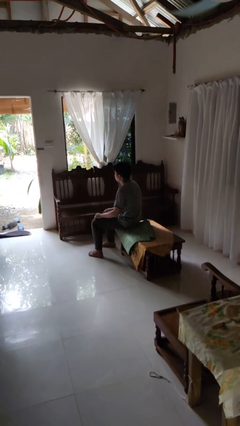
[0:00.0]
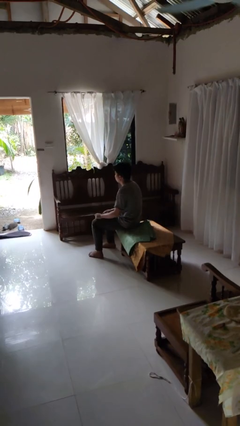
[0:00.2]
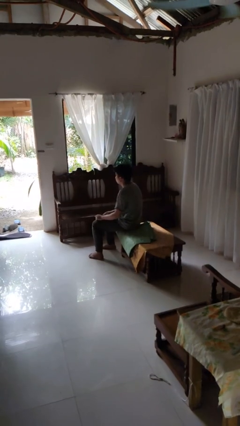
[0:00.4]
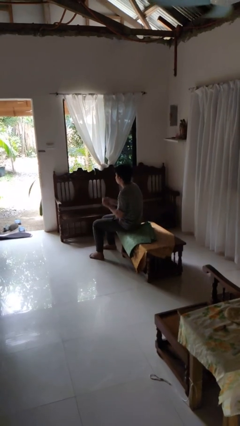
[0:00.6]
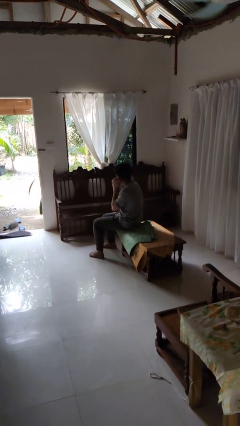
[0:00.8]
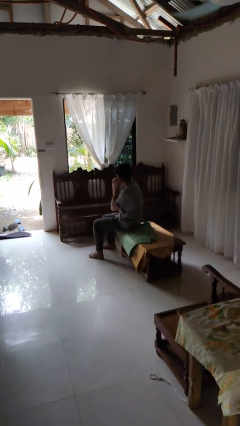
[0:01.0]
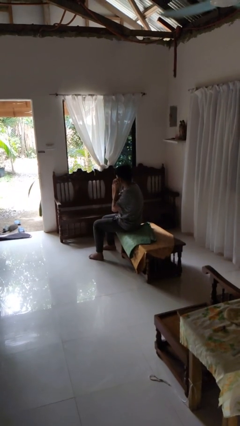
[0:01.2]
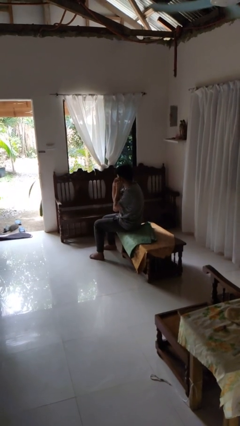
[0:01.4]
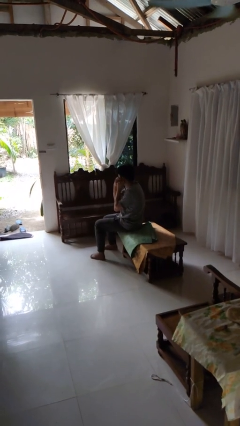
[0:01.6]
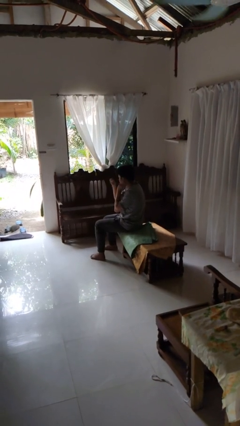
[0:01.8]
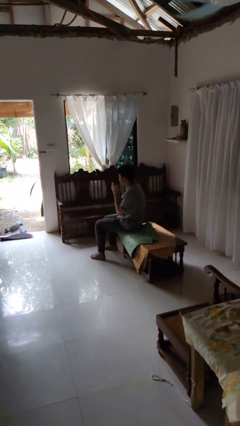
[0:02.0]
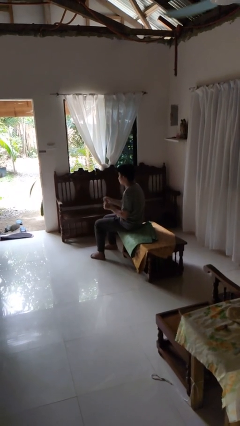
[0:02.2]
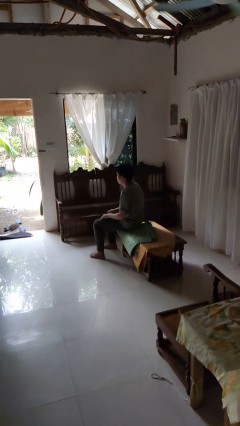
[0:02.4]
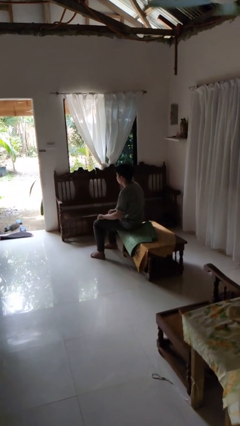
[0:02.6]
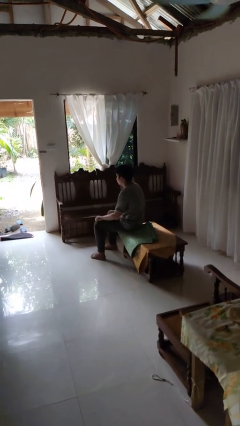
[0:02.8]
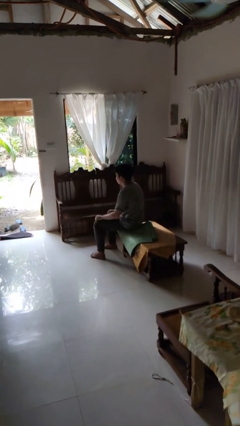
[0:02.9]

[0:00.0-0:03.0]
person takes off earrings

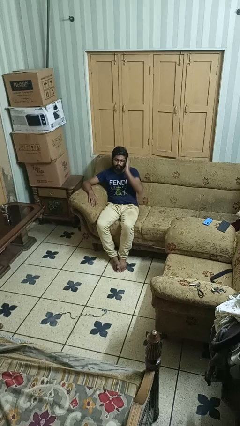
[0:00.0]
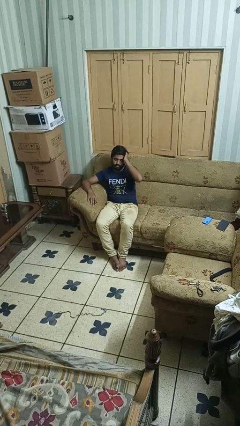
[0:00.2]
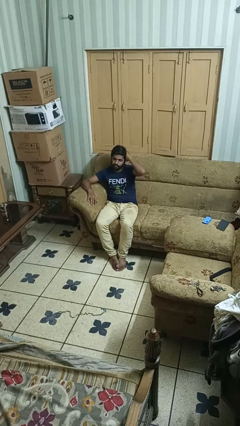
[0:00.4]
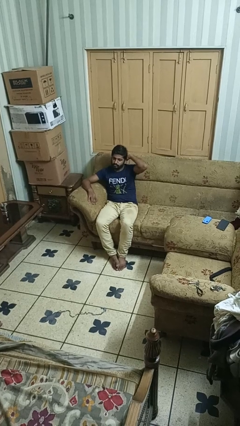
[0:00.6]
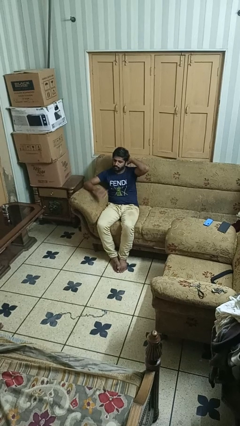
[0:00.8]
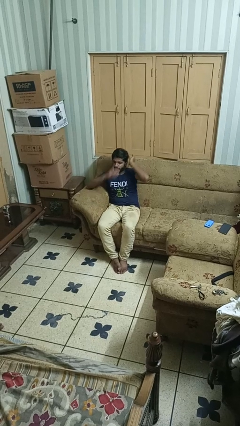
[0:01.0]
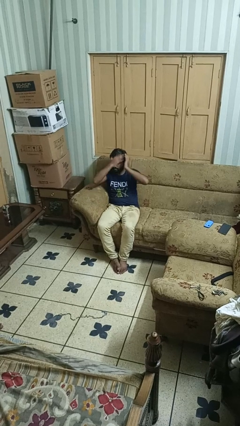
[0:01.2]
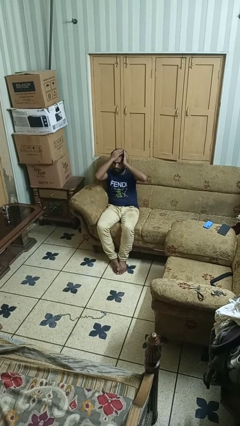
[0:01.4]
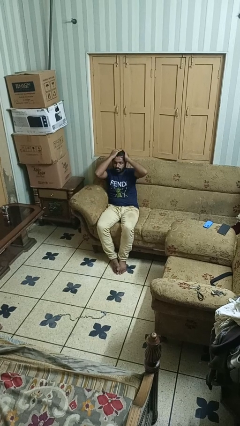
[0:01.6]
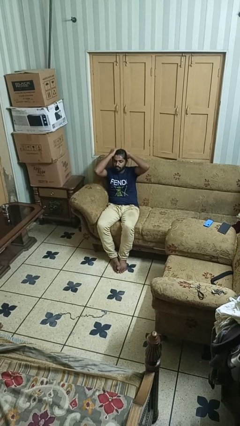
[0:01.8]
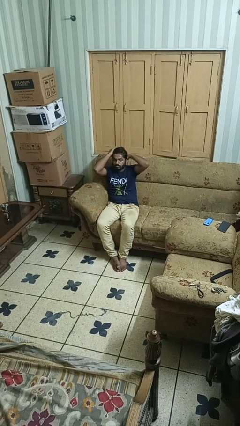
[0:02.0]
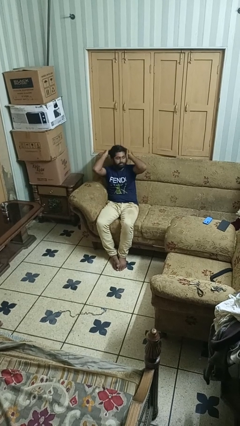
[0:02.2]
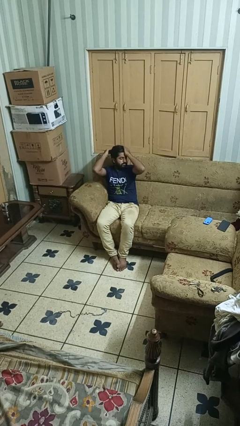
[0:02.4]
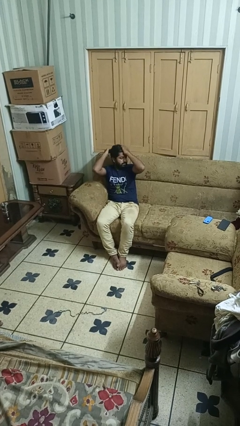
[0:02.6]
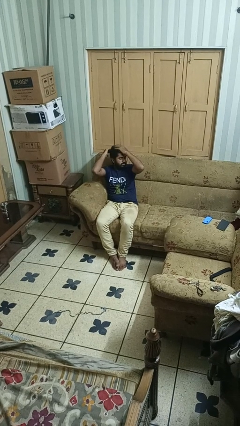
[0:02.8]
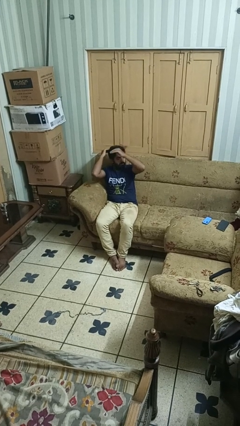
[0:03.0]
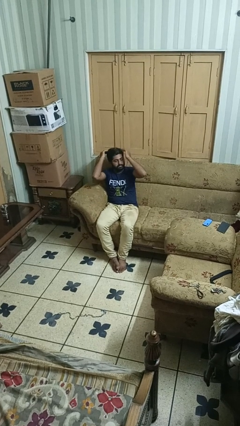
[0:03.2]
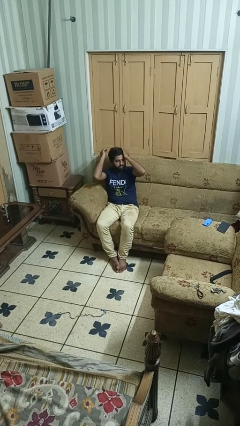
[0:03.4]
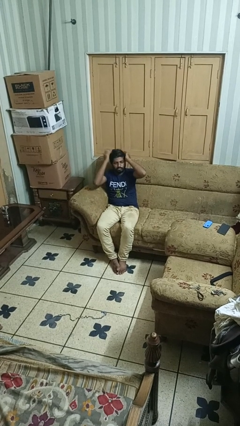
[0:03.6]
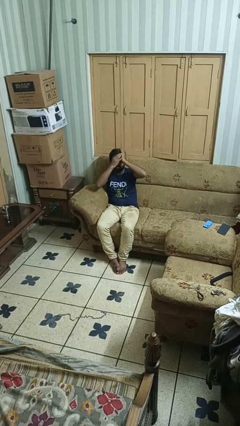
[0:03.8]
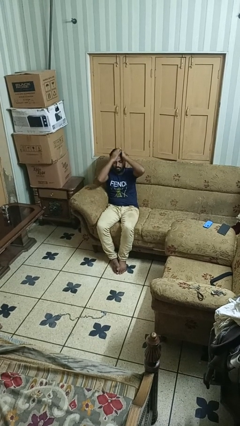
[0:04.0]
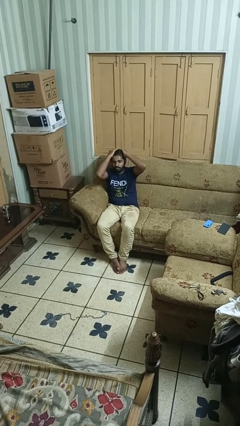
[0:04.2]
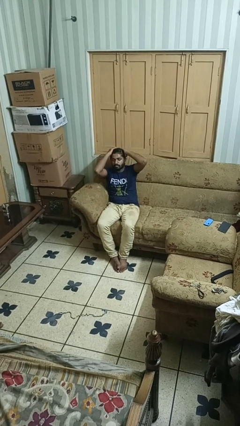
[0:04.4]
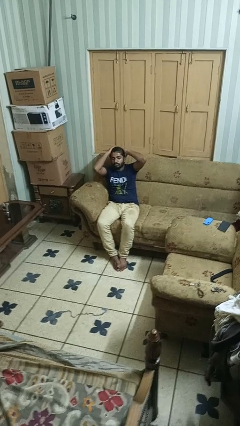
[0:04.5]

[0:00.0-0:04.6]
person strokes hair

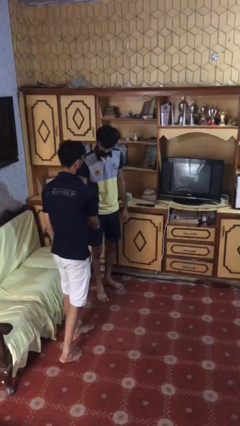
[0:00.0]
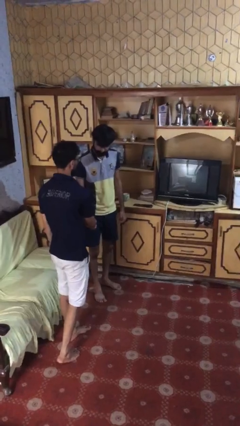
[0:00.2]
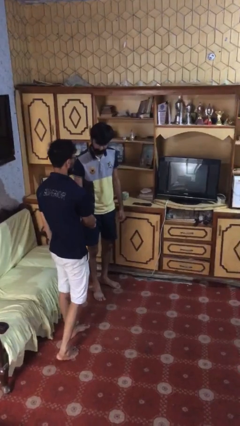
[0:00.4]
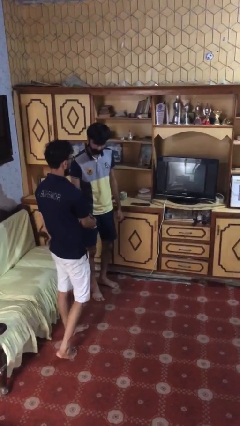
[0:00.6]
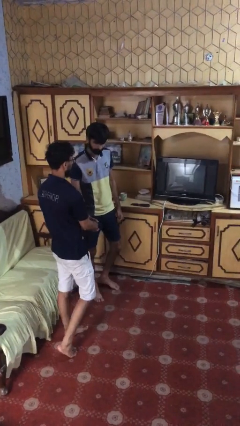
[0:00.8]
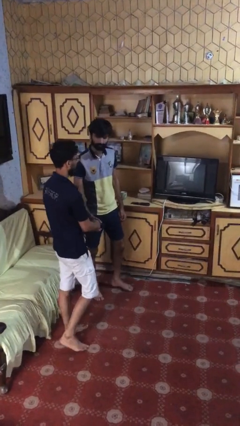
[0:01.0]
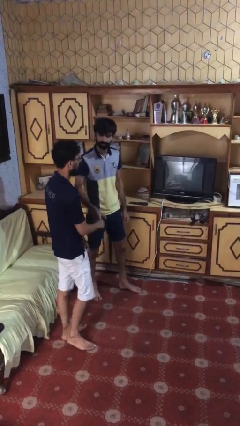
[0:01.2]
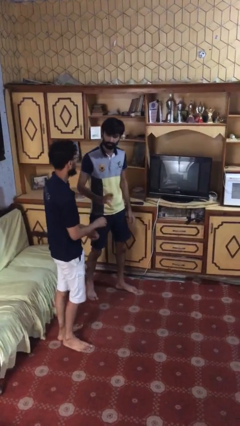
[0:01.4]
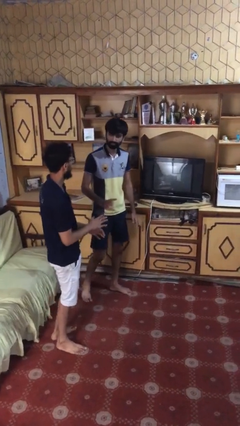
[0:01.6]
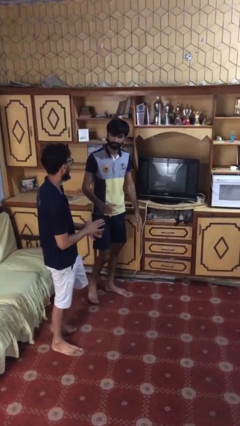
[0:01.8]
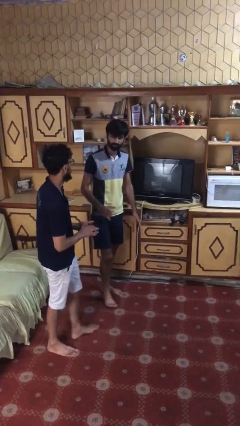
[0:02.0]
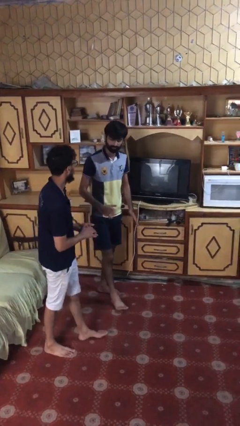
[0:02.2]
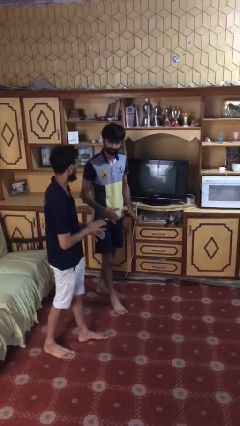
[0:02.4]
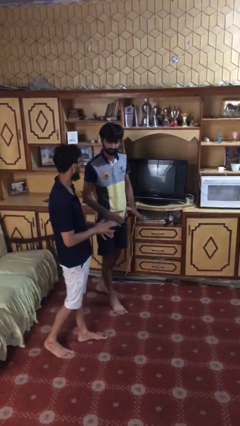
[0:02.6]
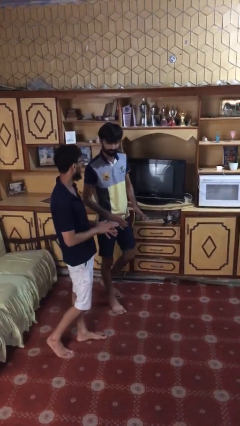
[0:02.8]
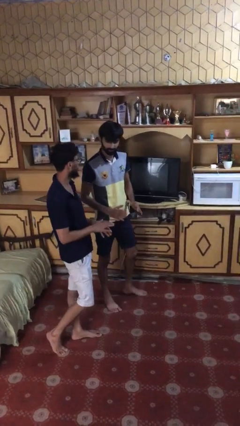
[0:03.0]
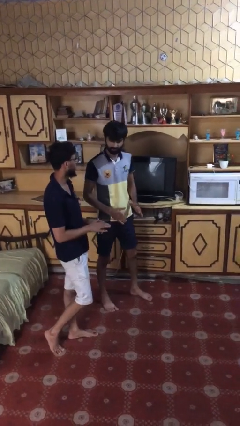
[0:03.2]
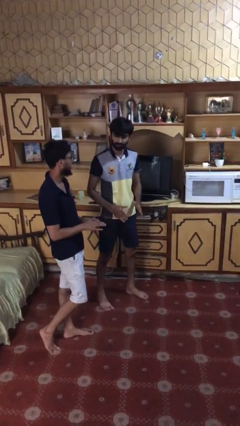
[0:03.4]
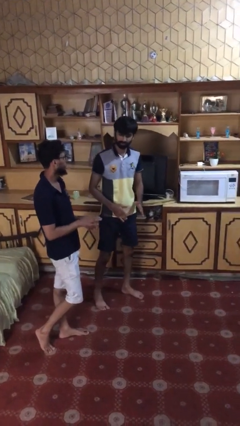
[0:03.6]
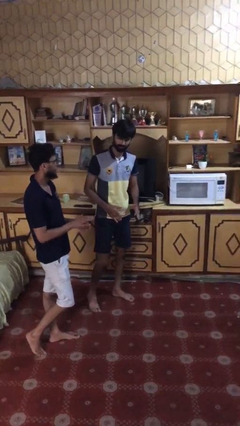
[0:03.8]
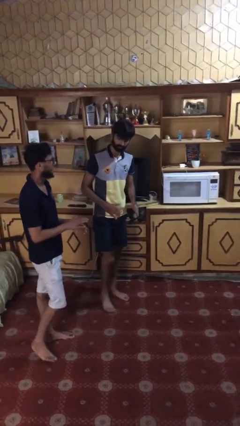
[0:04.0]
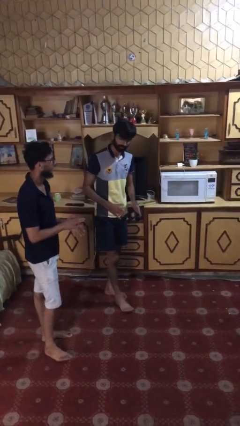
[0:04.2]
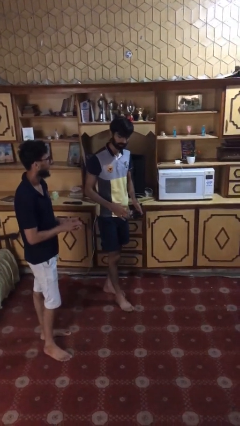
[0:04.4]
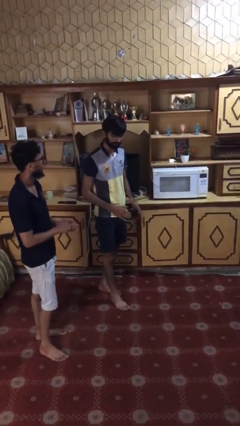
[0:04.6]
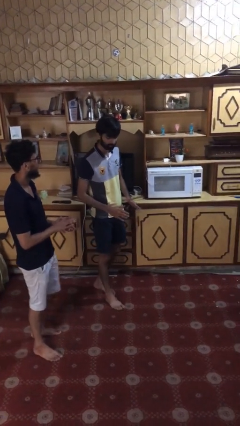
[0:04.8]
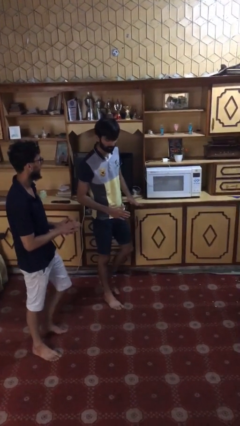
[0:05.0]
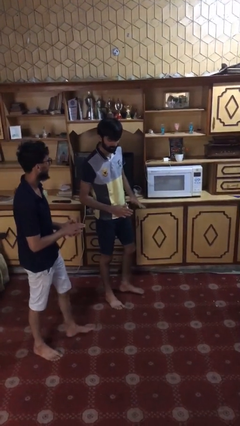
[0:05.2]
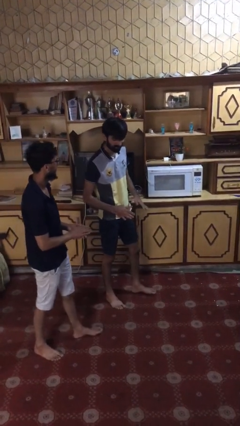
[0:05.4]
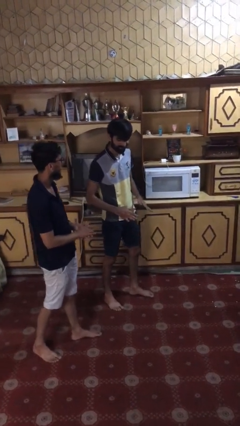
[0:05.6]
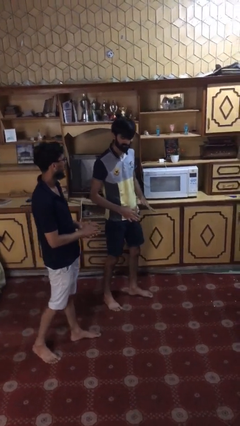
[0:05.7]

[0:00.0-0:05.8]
person talks to person

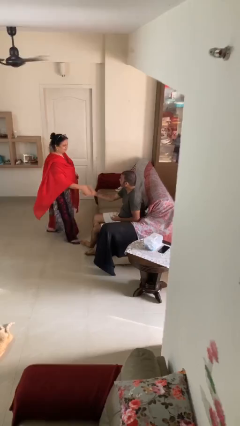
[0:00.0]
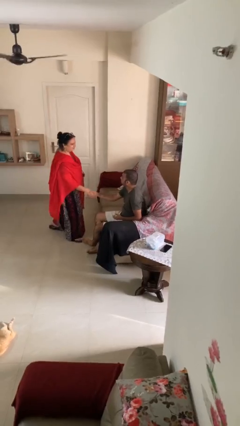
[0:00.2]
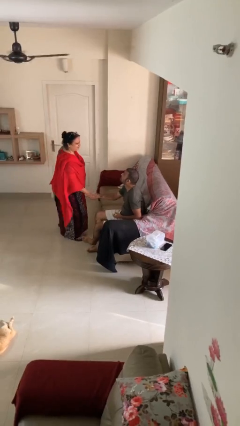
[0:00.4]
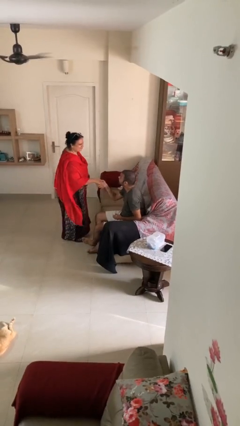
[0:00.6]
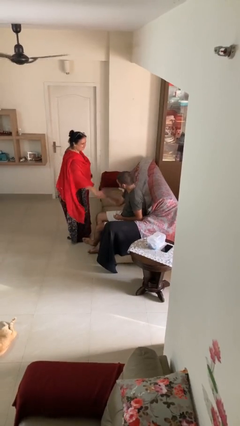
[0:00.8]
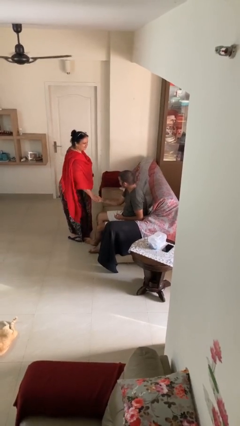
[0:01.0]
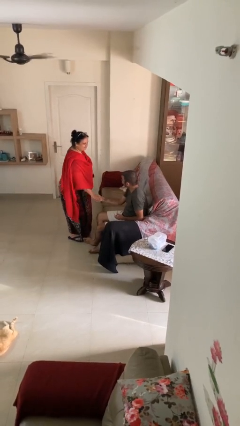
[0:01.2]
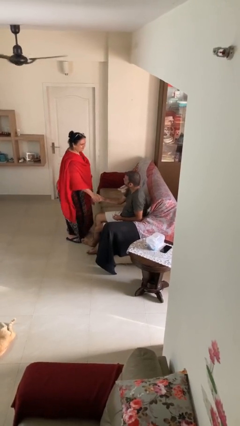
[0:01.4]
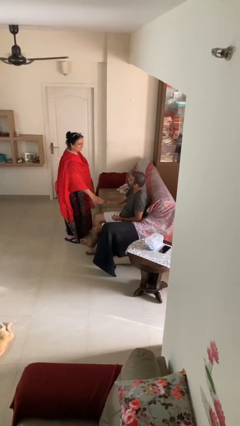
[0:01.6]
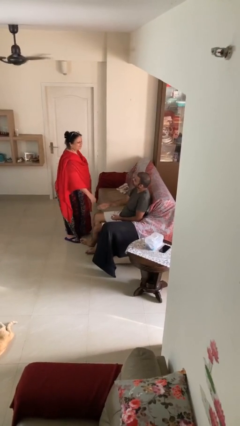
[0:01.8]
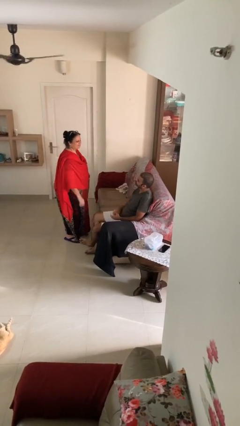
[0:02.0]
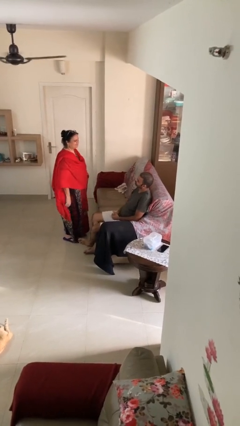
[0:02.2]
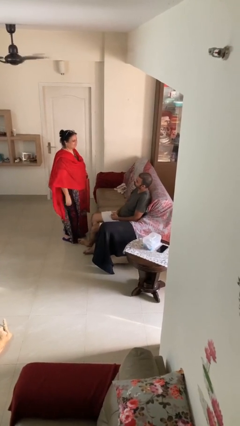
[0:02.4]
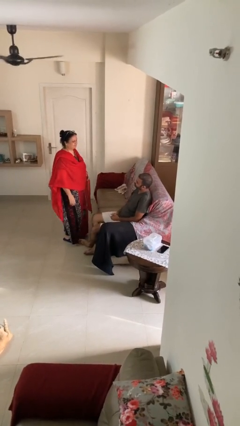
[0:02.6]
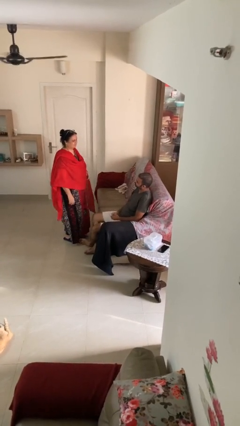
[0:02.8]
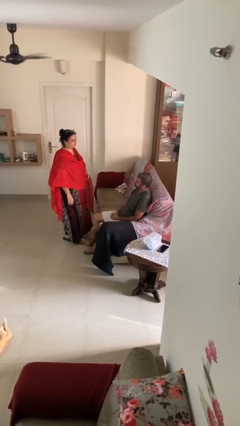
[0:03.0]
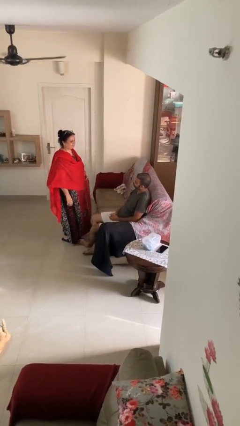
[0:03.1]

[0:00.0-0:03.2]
person shakes hand

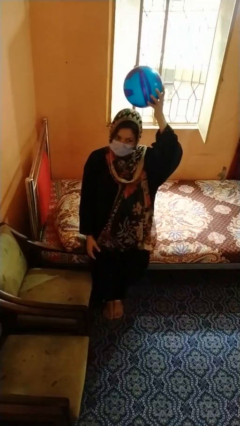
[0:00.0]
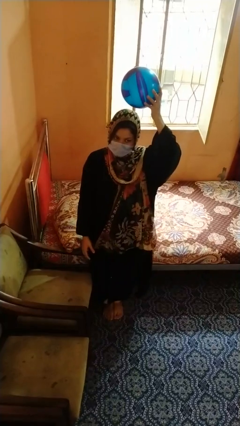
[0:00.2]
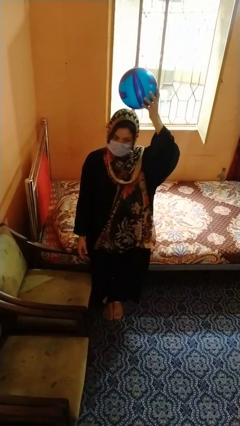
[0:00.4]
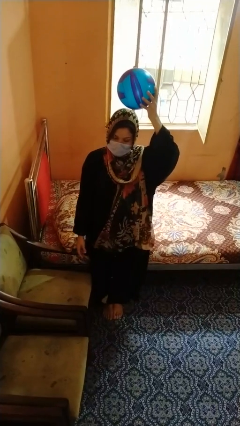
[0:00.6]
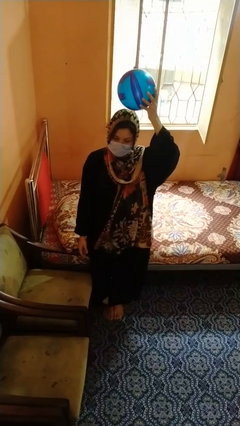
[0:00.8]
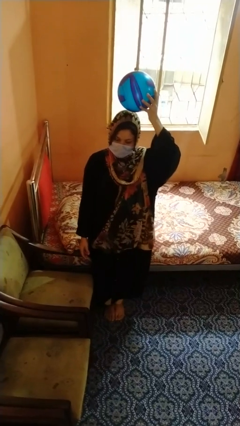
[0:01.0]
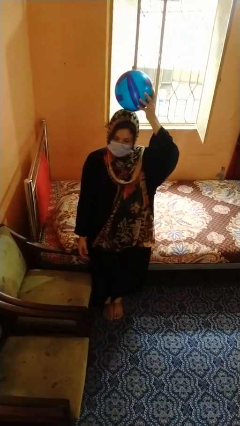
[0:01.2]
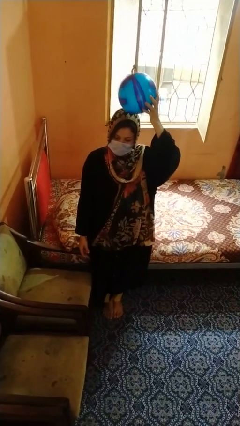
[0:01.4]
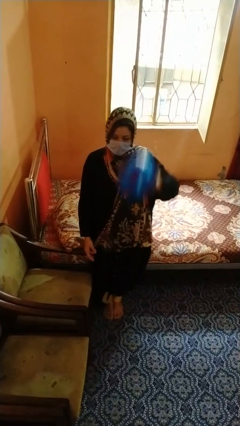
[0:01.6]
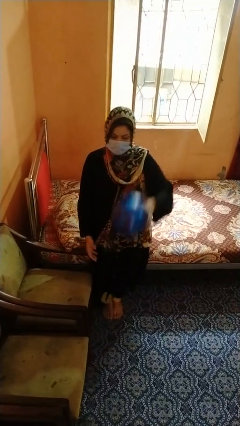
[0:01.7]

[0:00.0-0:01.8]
person holds object above head
